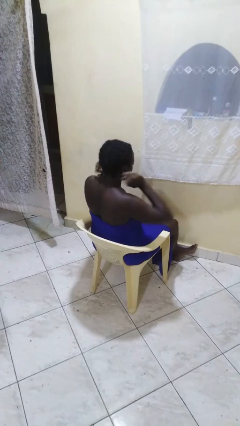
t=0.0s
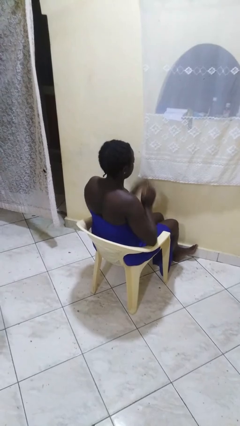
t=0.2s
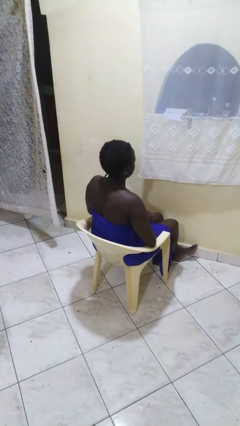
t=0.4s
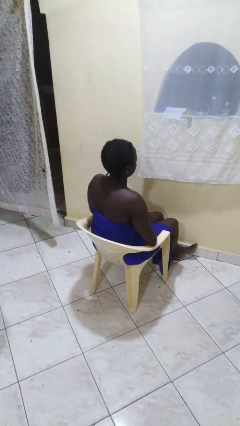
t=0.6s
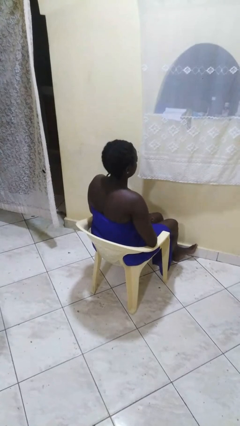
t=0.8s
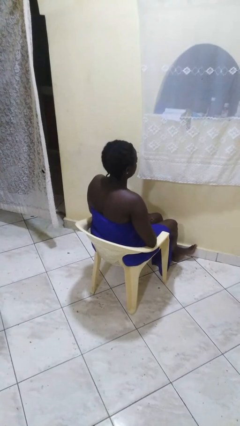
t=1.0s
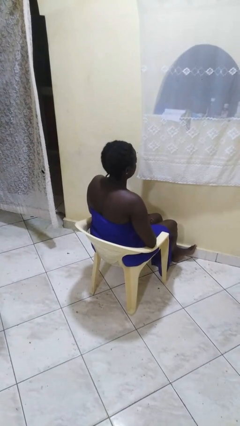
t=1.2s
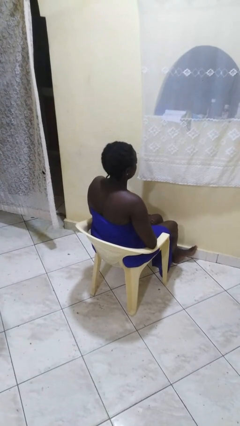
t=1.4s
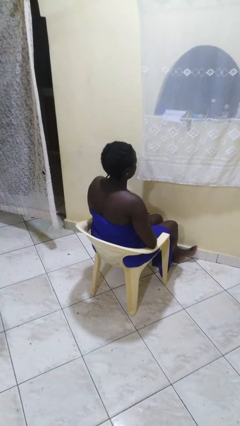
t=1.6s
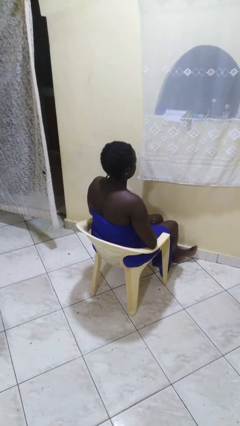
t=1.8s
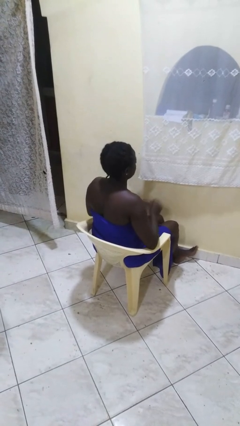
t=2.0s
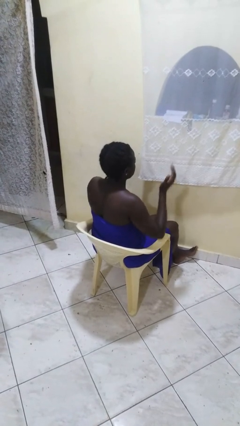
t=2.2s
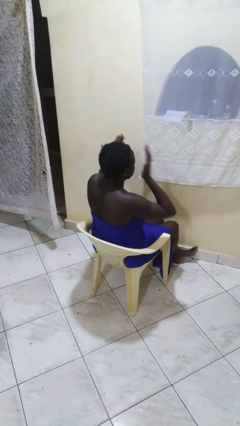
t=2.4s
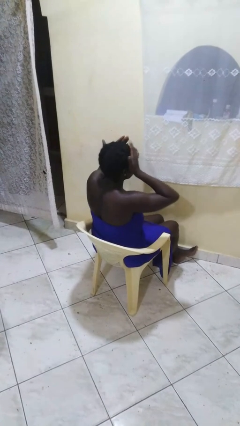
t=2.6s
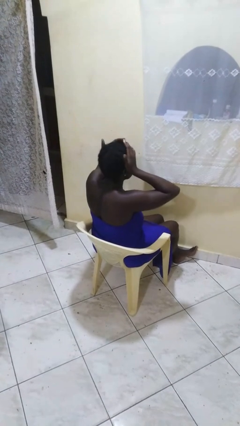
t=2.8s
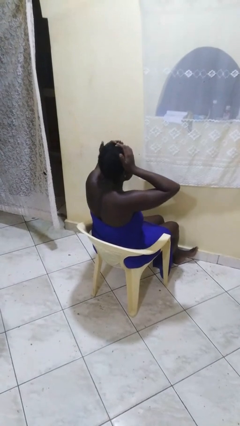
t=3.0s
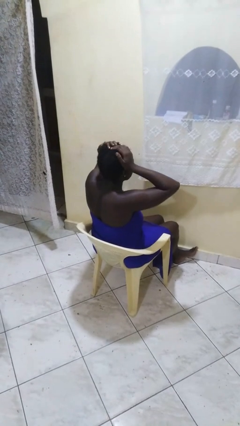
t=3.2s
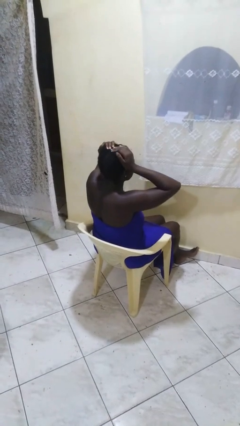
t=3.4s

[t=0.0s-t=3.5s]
person strokes hair

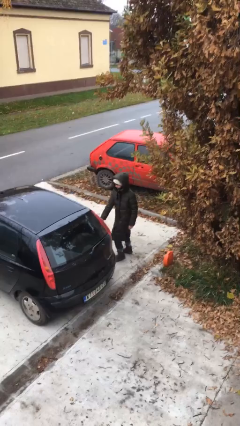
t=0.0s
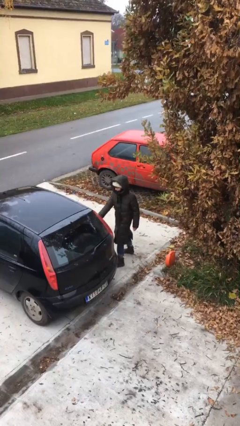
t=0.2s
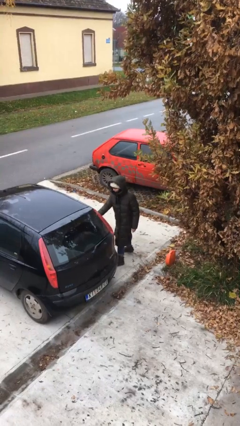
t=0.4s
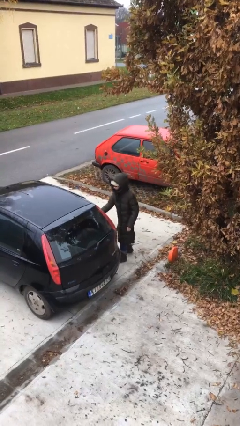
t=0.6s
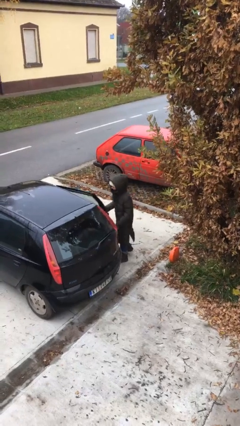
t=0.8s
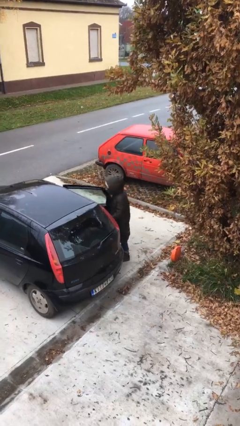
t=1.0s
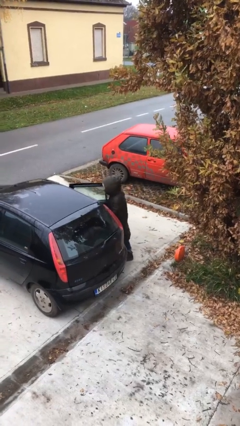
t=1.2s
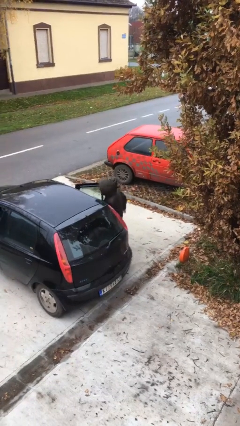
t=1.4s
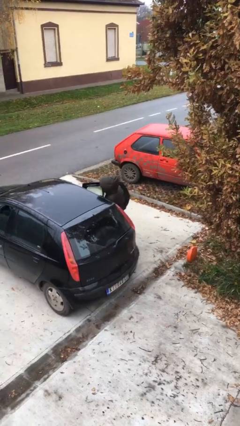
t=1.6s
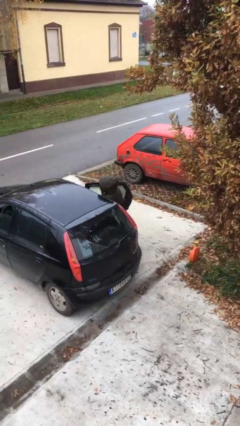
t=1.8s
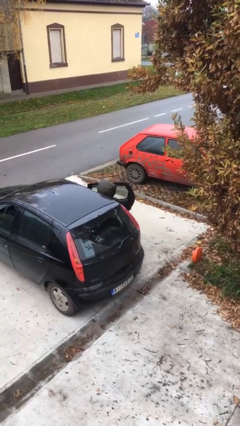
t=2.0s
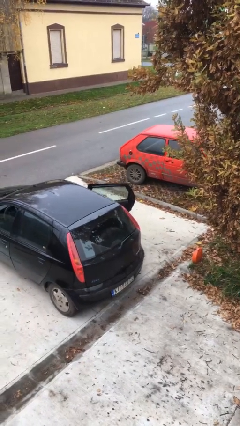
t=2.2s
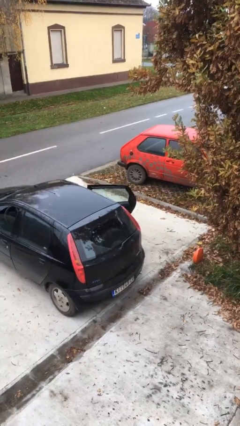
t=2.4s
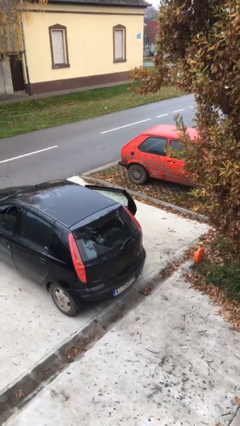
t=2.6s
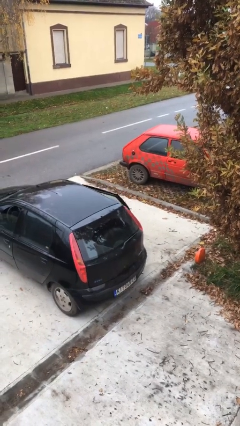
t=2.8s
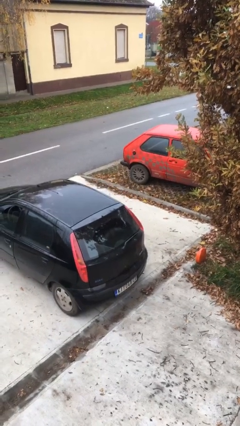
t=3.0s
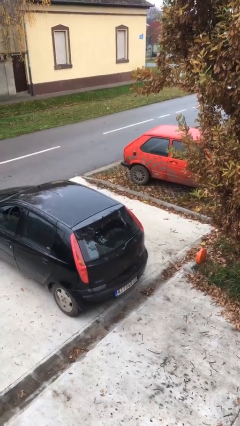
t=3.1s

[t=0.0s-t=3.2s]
person enters car

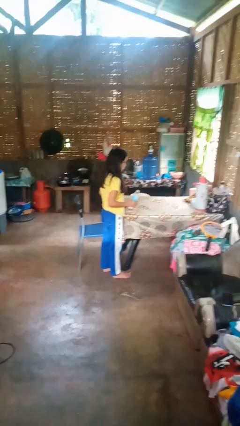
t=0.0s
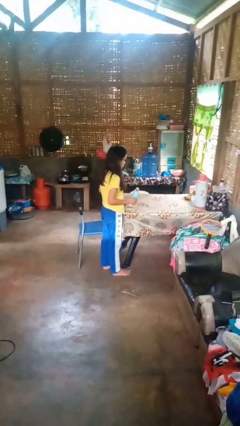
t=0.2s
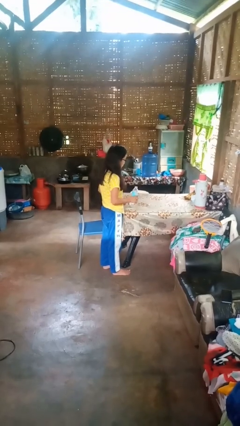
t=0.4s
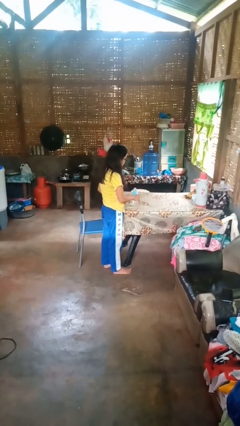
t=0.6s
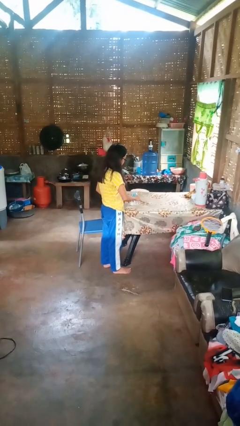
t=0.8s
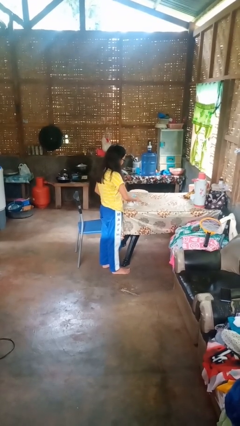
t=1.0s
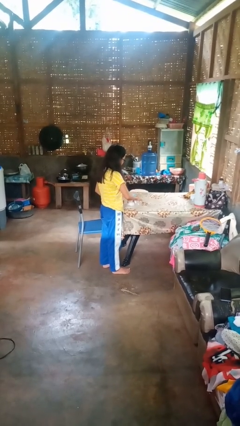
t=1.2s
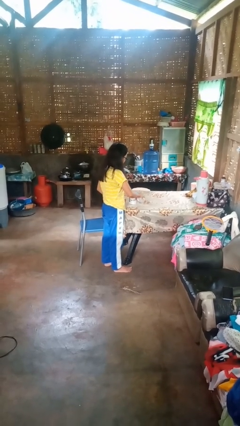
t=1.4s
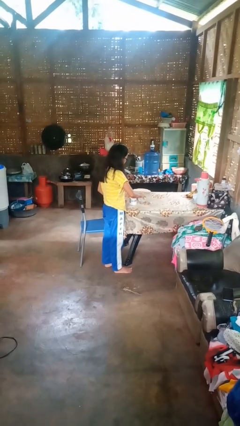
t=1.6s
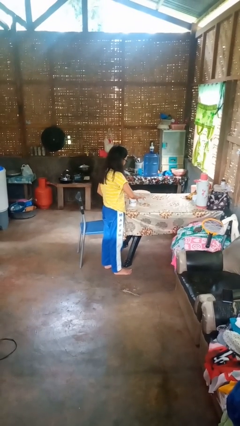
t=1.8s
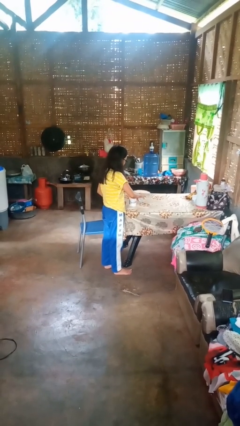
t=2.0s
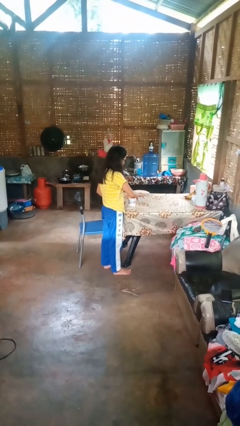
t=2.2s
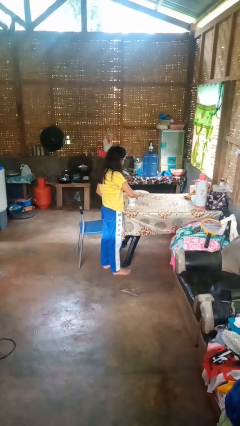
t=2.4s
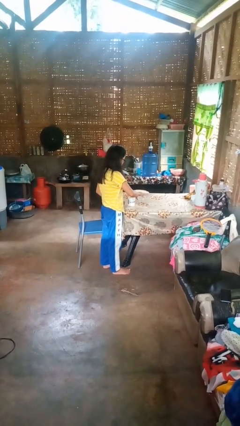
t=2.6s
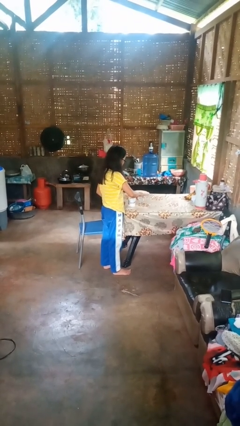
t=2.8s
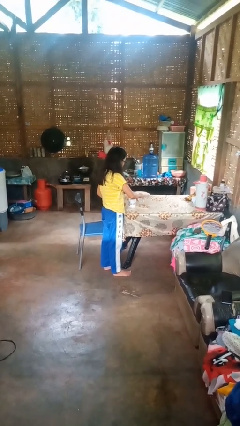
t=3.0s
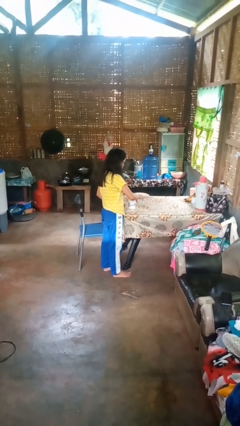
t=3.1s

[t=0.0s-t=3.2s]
person pours liquid into cup

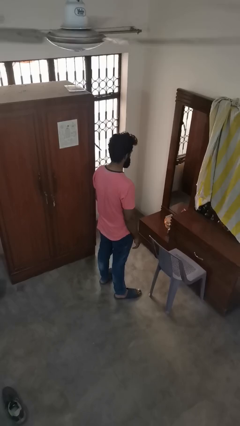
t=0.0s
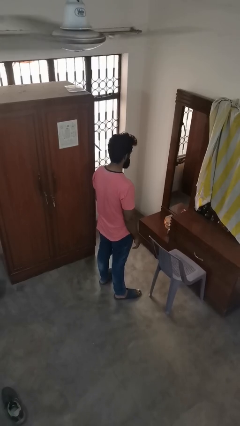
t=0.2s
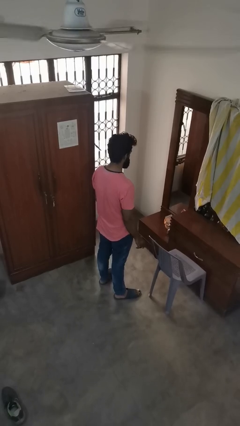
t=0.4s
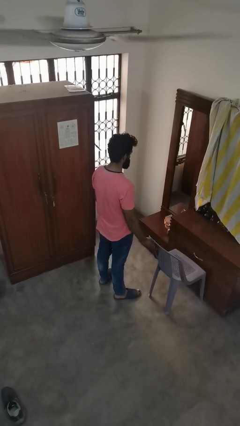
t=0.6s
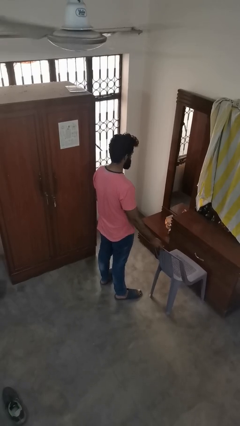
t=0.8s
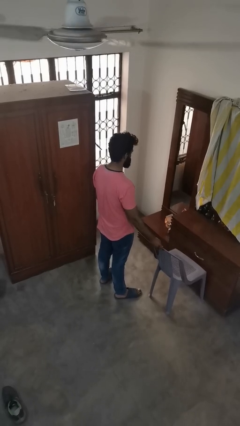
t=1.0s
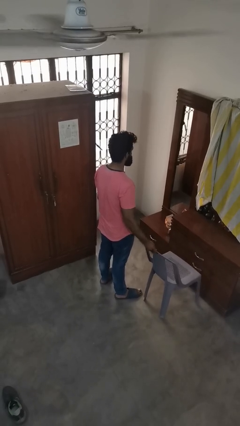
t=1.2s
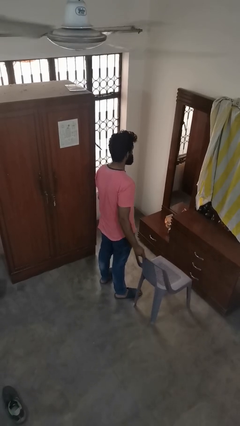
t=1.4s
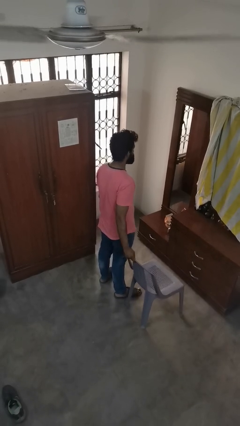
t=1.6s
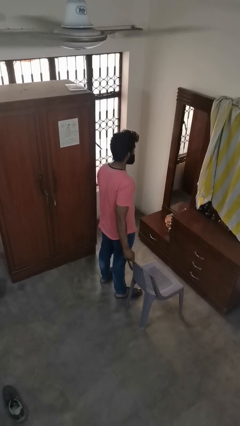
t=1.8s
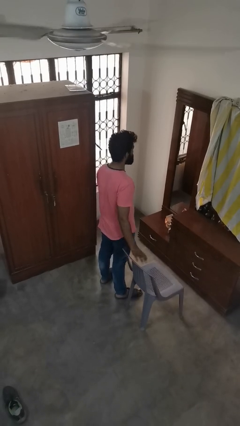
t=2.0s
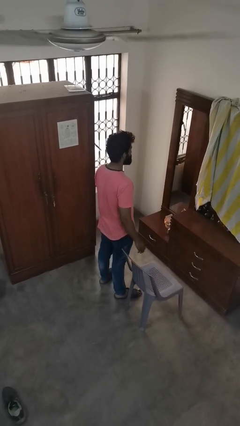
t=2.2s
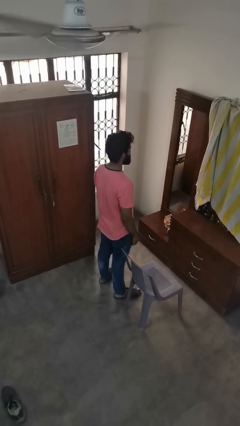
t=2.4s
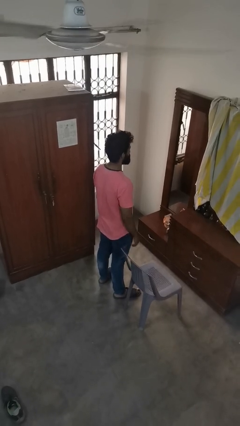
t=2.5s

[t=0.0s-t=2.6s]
person pulls out chair

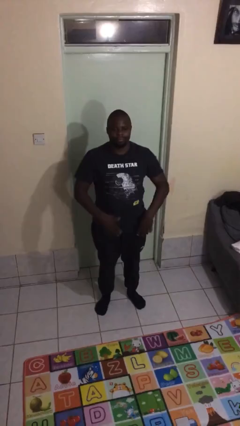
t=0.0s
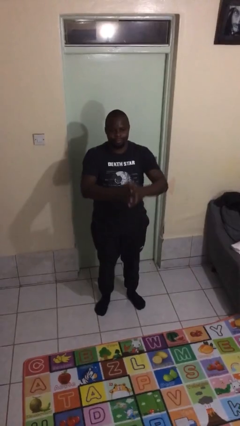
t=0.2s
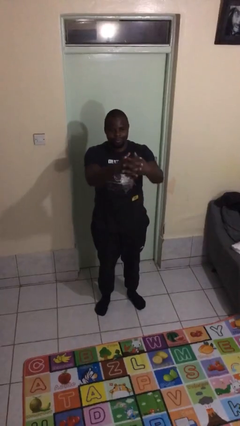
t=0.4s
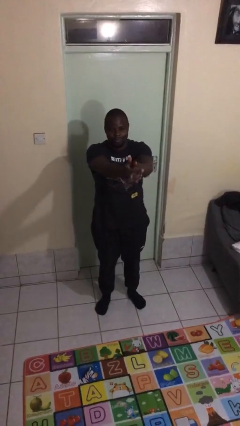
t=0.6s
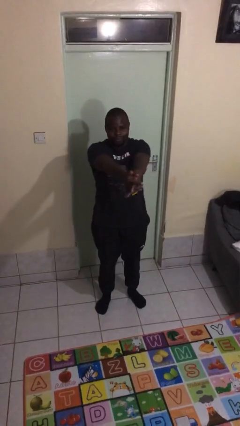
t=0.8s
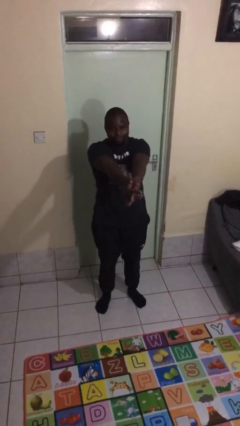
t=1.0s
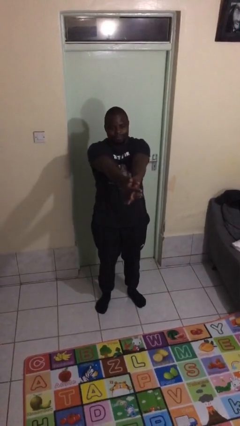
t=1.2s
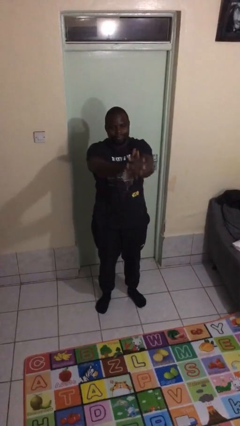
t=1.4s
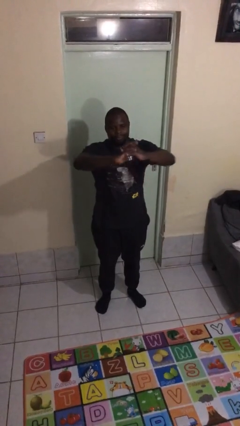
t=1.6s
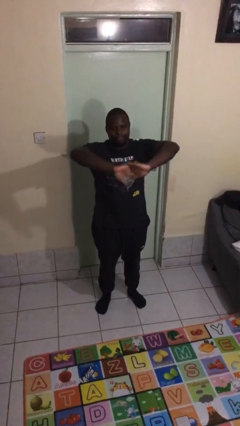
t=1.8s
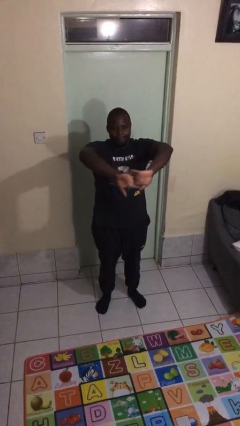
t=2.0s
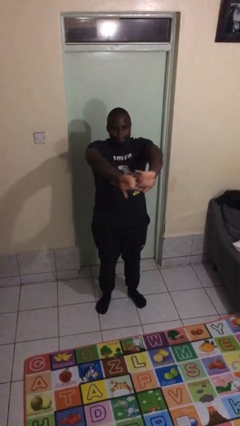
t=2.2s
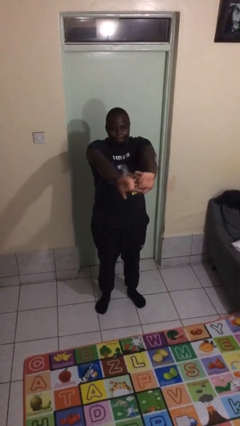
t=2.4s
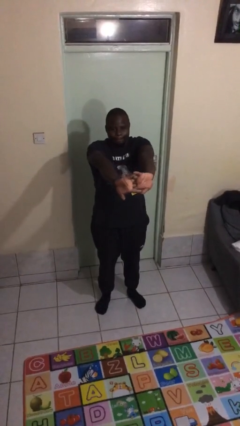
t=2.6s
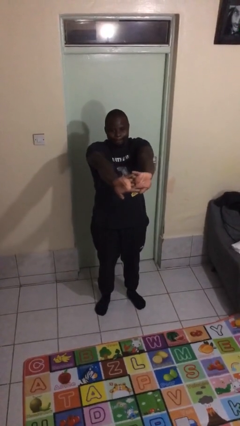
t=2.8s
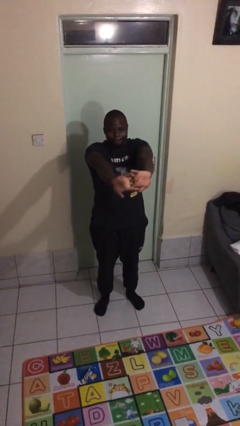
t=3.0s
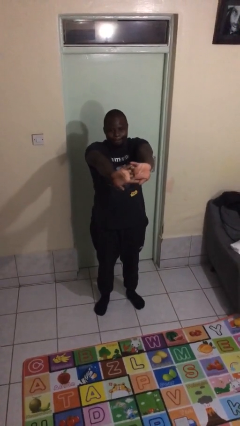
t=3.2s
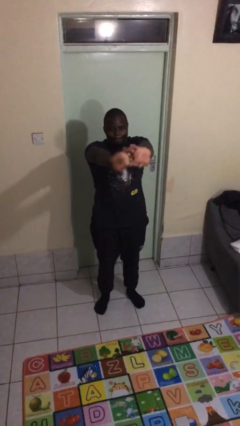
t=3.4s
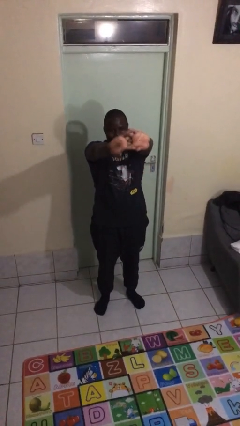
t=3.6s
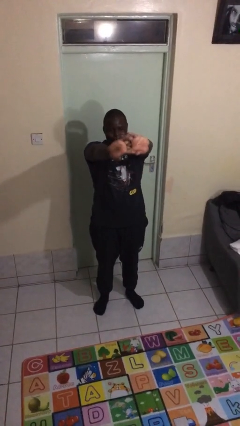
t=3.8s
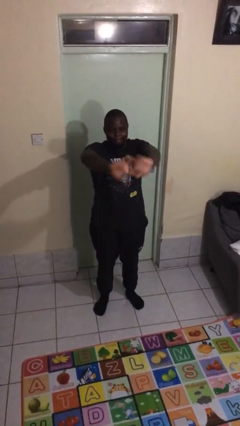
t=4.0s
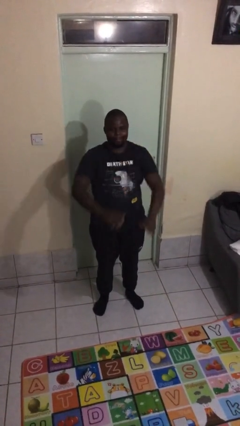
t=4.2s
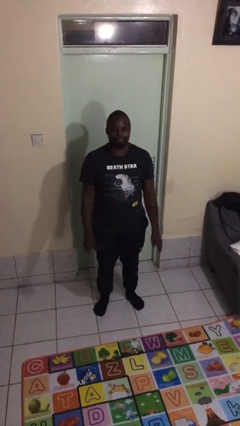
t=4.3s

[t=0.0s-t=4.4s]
person cracks knuckles

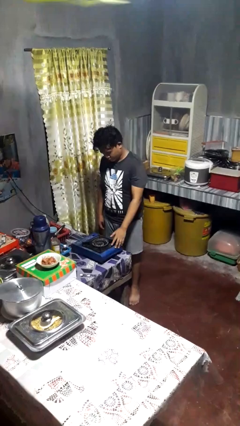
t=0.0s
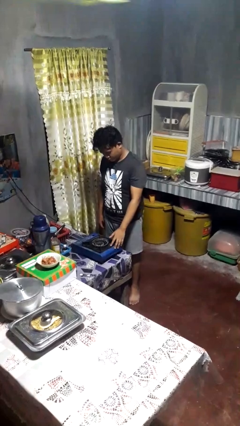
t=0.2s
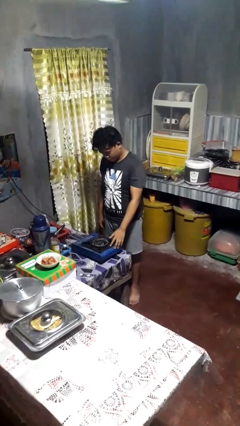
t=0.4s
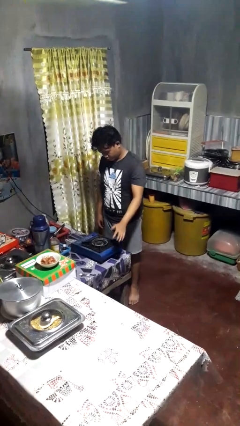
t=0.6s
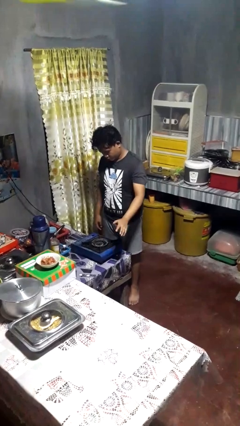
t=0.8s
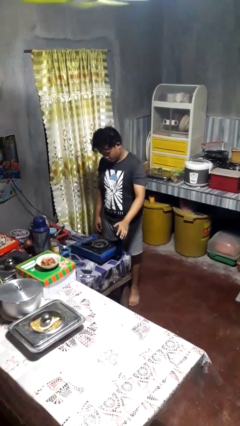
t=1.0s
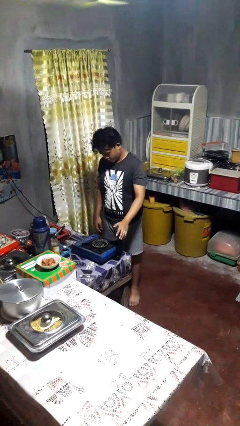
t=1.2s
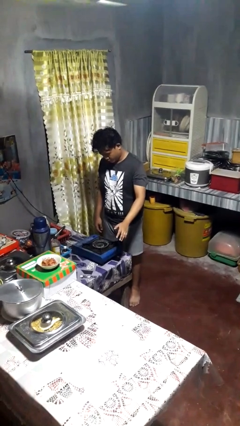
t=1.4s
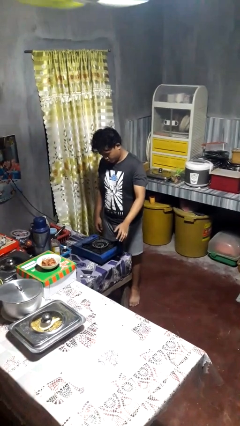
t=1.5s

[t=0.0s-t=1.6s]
person burns hand
